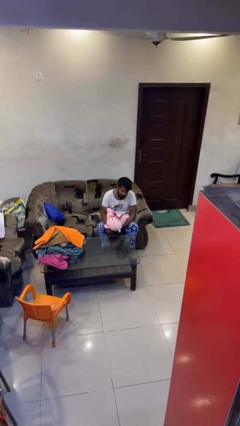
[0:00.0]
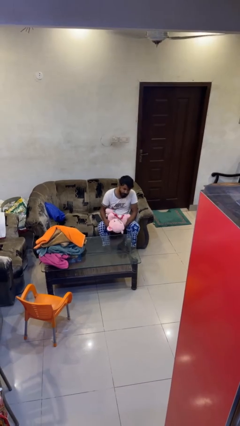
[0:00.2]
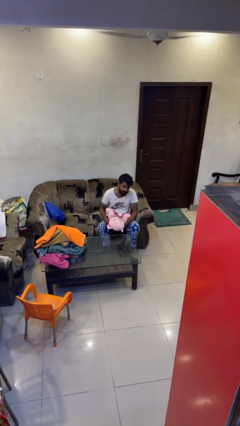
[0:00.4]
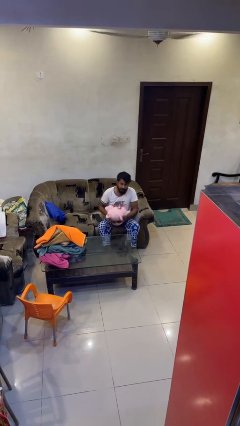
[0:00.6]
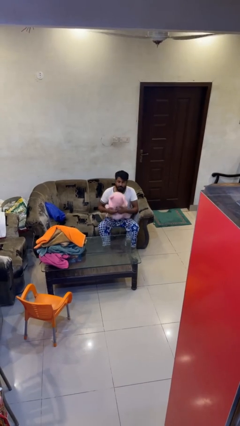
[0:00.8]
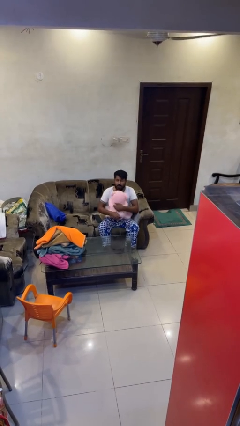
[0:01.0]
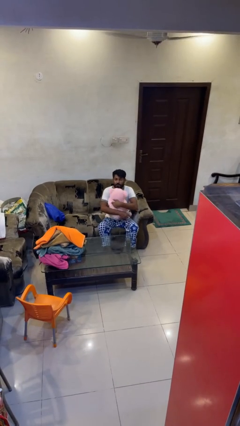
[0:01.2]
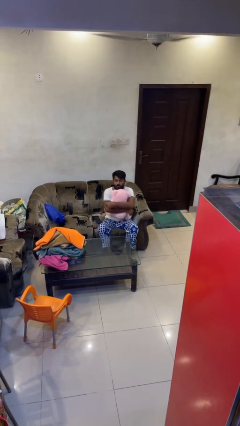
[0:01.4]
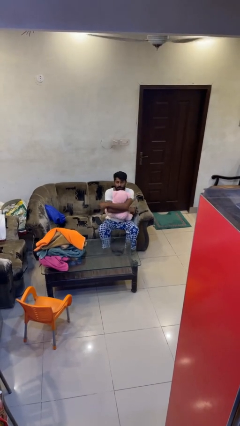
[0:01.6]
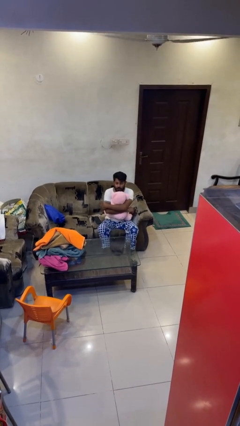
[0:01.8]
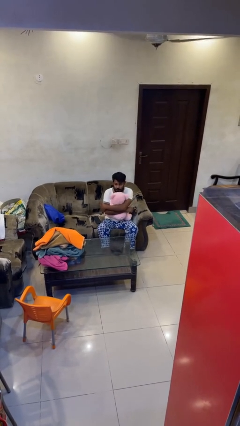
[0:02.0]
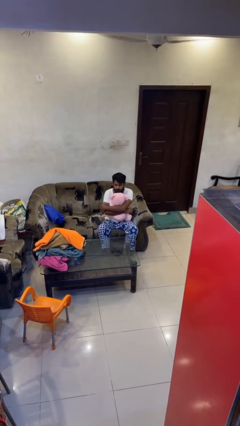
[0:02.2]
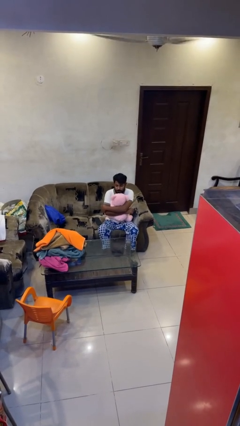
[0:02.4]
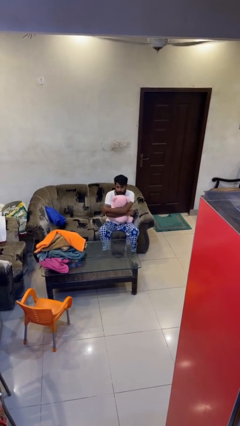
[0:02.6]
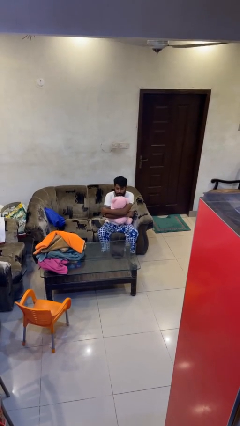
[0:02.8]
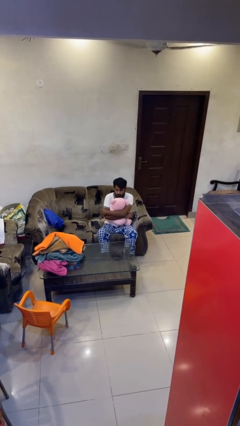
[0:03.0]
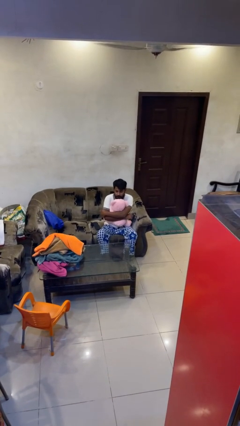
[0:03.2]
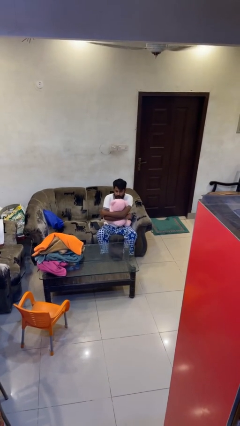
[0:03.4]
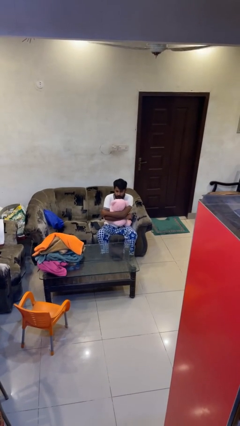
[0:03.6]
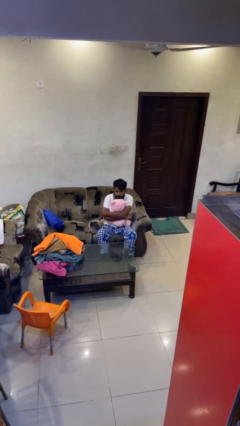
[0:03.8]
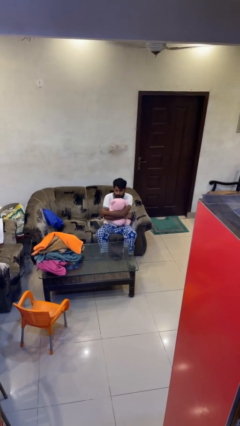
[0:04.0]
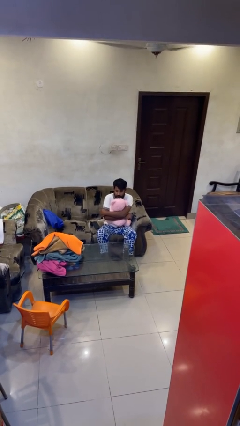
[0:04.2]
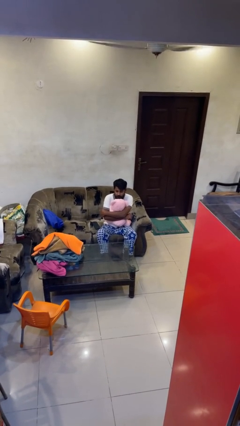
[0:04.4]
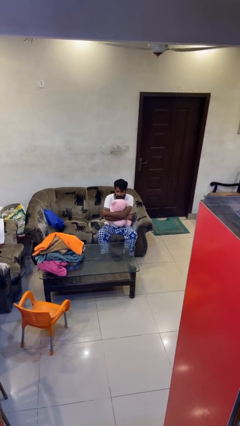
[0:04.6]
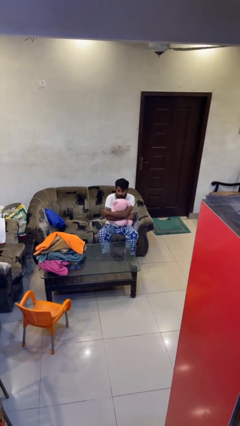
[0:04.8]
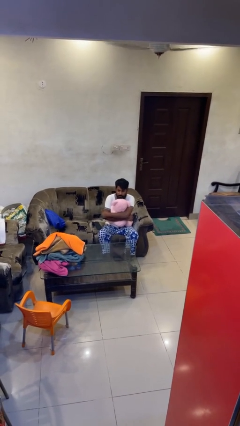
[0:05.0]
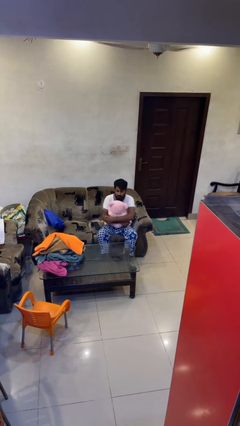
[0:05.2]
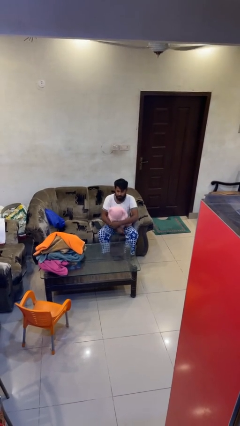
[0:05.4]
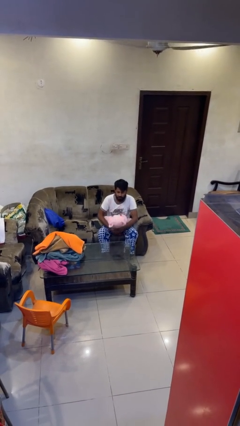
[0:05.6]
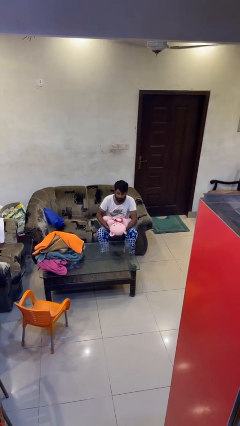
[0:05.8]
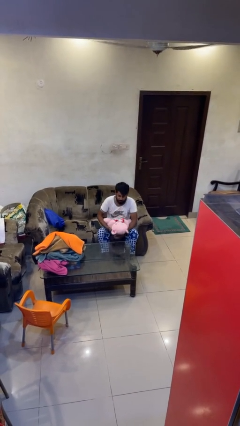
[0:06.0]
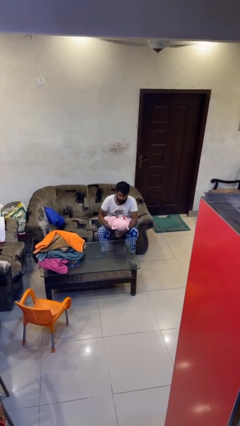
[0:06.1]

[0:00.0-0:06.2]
person hugs stuffed animal

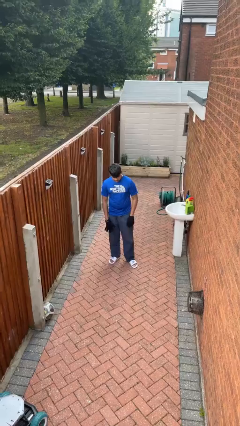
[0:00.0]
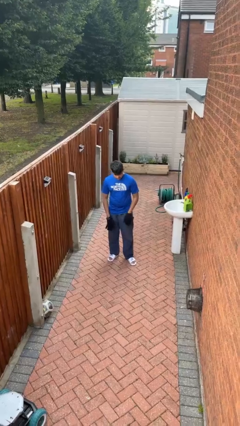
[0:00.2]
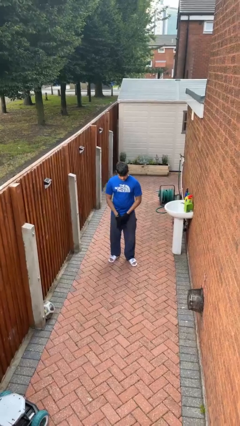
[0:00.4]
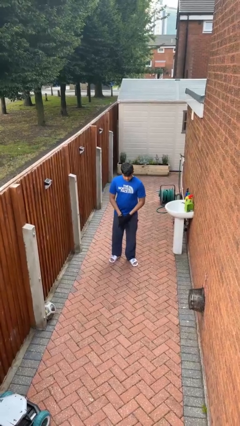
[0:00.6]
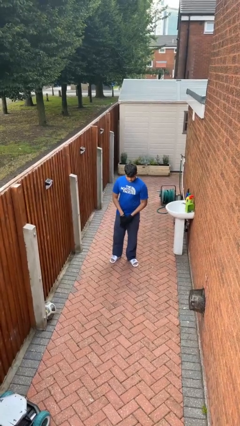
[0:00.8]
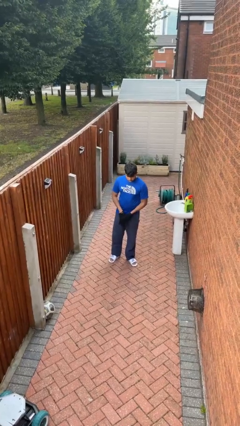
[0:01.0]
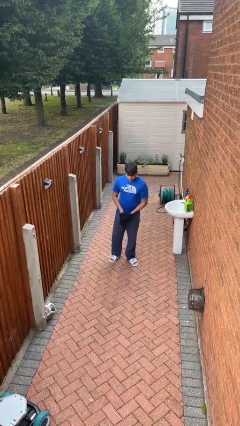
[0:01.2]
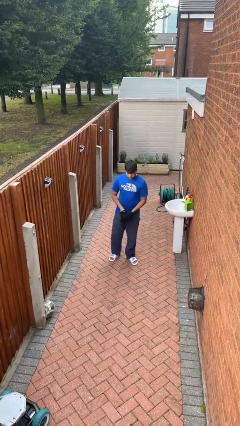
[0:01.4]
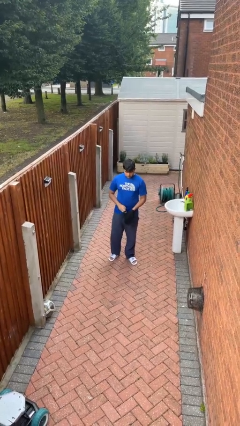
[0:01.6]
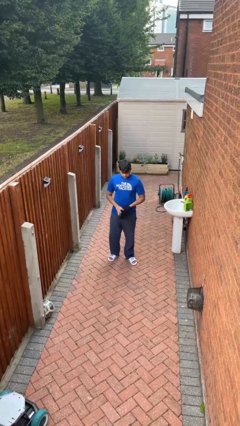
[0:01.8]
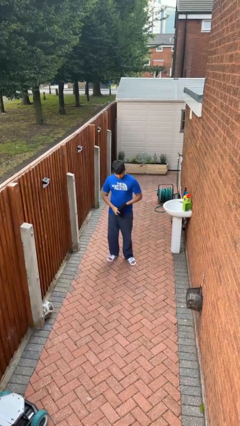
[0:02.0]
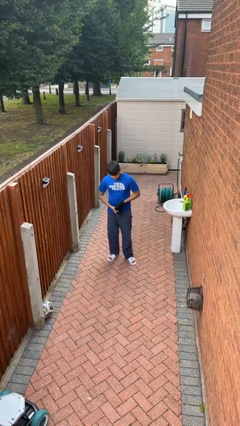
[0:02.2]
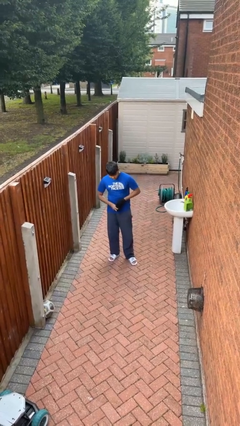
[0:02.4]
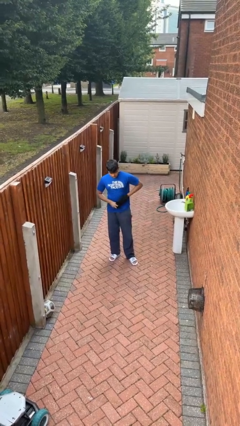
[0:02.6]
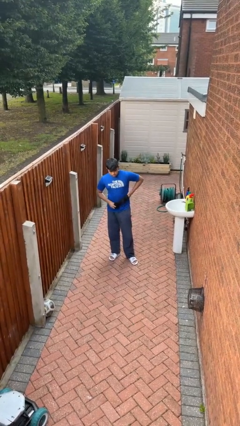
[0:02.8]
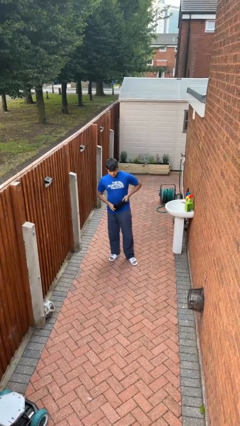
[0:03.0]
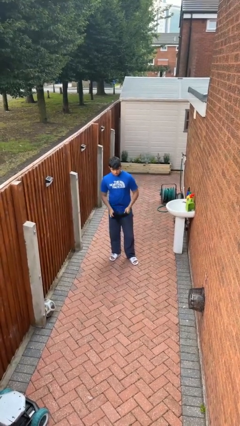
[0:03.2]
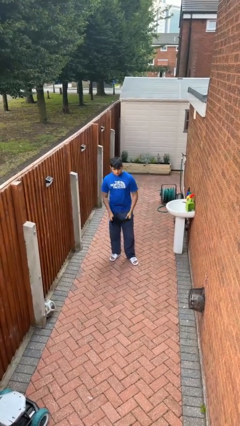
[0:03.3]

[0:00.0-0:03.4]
person takes off gloves

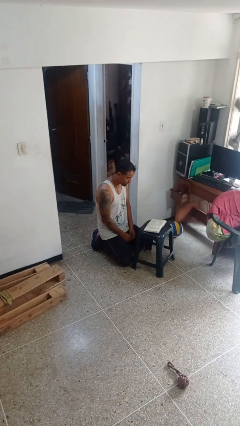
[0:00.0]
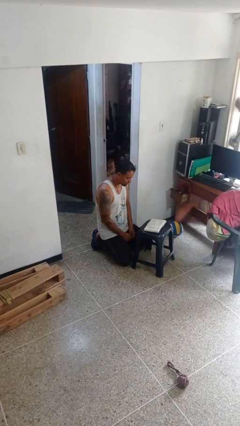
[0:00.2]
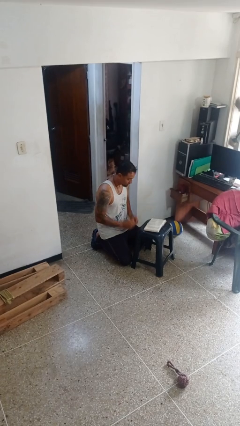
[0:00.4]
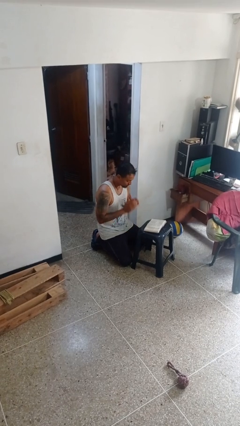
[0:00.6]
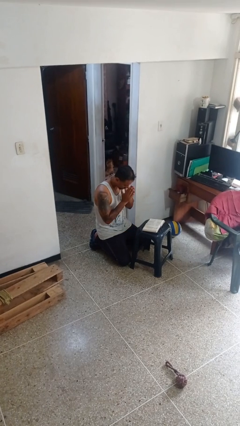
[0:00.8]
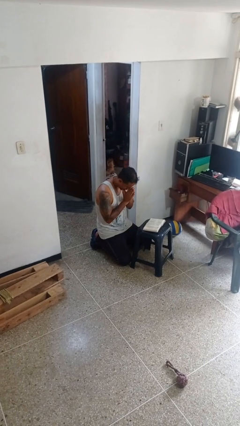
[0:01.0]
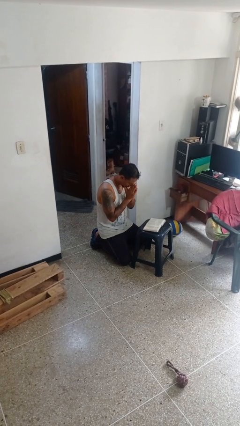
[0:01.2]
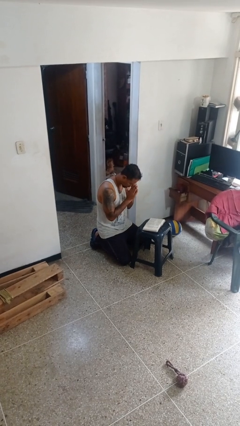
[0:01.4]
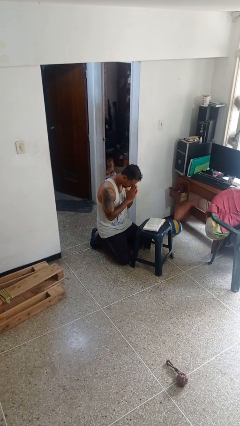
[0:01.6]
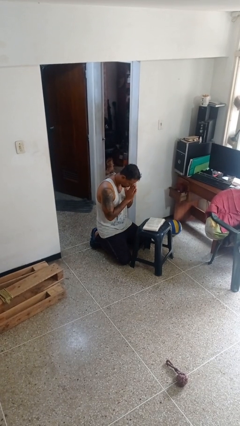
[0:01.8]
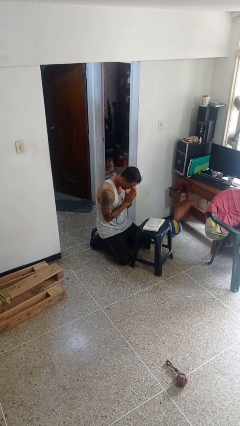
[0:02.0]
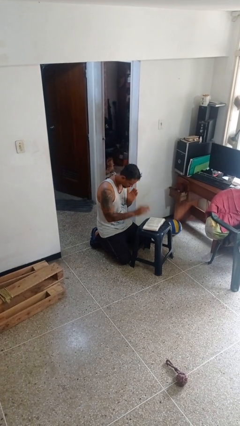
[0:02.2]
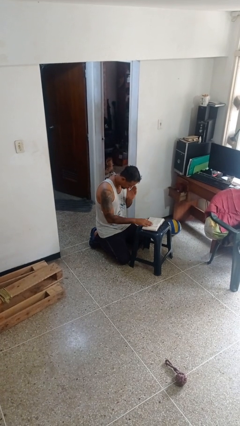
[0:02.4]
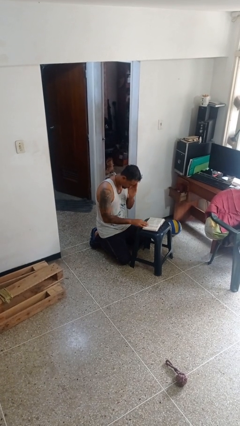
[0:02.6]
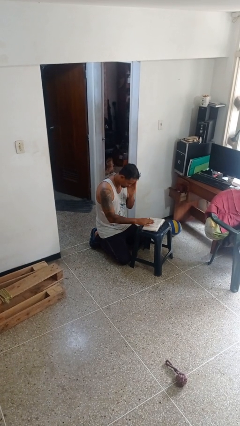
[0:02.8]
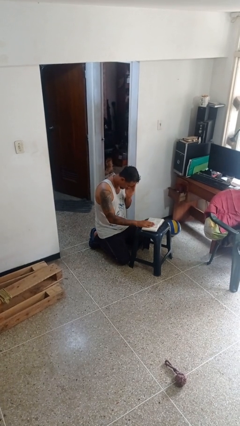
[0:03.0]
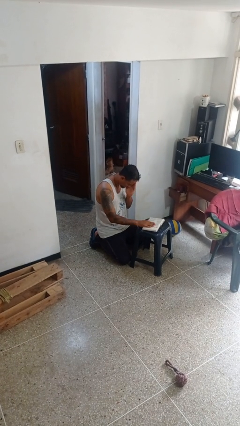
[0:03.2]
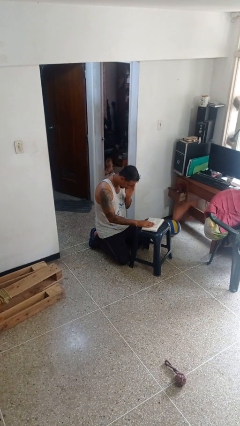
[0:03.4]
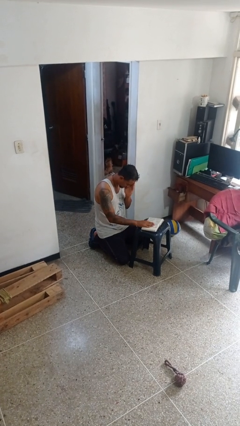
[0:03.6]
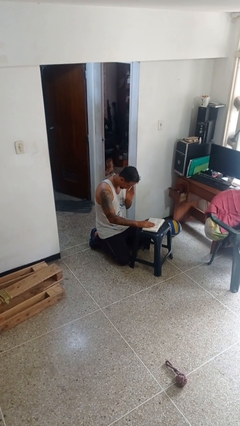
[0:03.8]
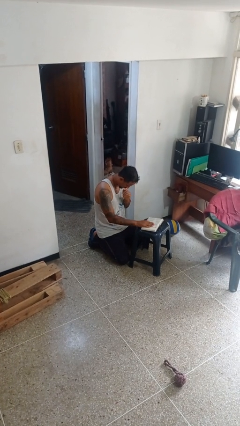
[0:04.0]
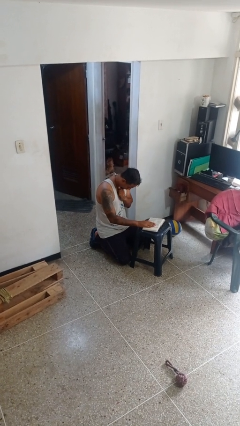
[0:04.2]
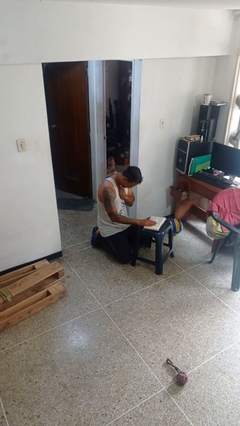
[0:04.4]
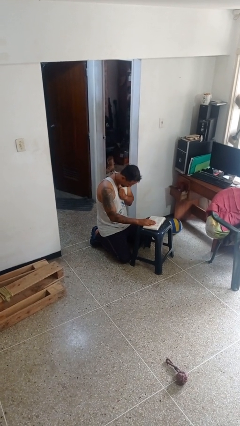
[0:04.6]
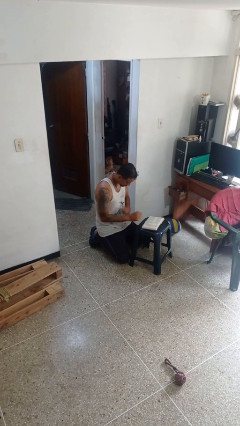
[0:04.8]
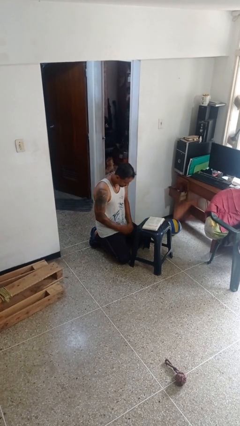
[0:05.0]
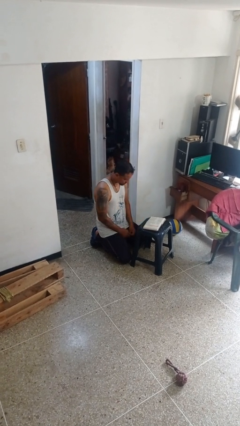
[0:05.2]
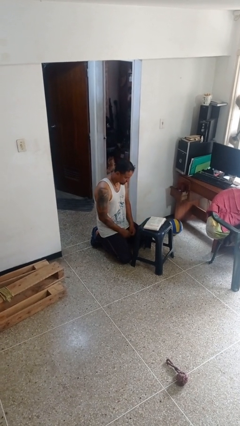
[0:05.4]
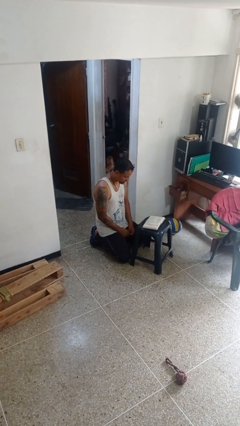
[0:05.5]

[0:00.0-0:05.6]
person prays

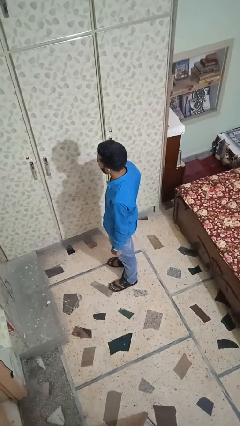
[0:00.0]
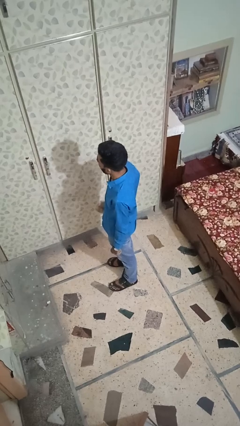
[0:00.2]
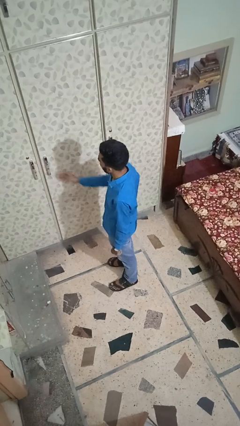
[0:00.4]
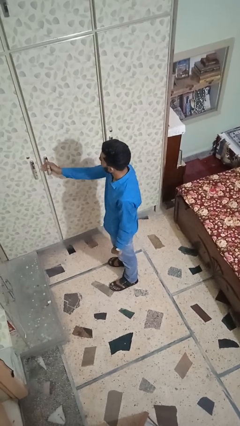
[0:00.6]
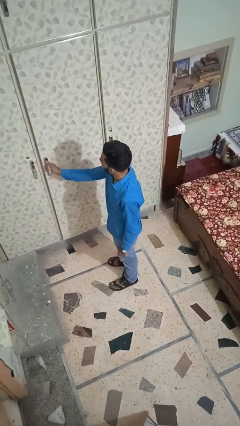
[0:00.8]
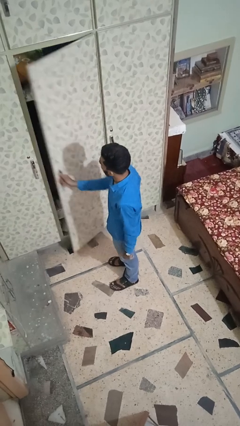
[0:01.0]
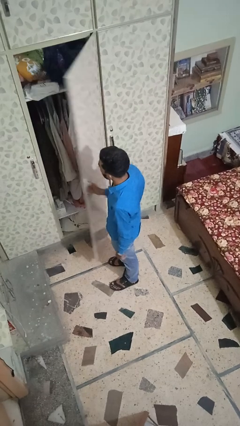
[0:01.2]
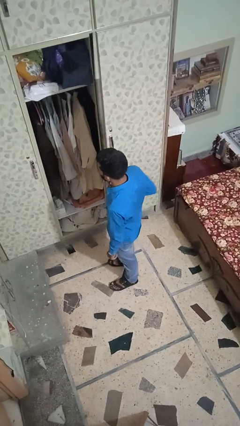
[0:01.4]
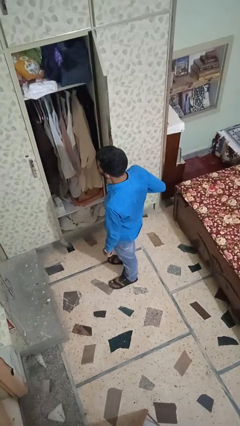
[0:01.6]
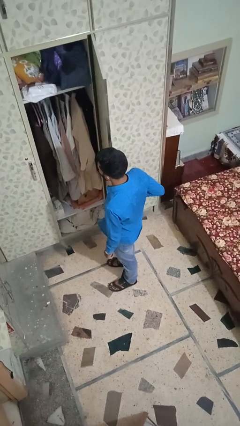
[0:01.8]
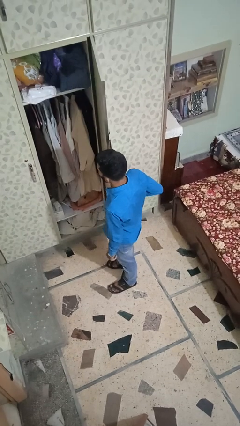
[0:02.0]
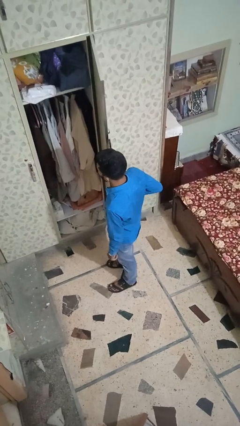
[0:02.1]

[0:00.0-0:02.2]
person opens closet door

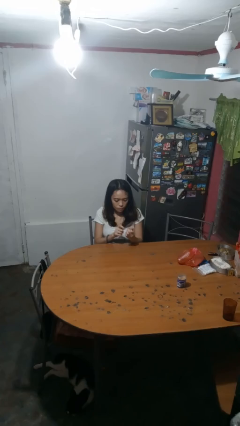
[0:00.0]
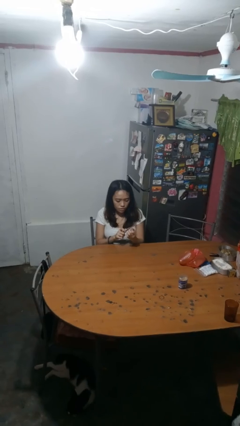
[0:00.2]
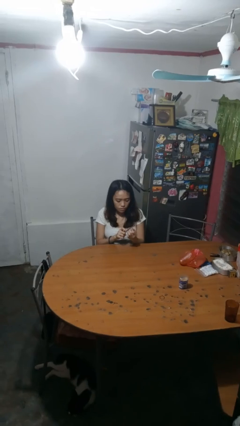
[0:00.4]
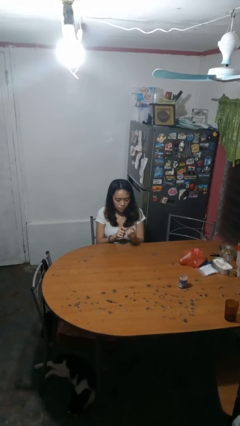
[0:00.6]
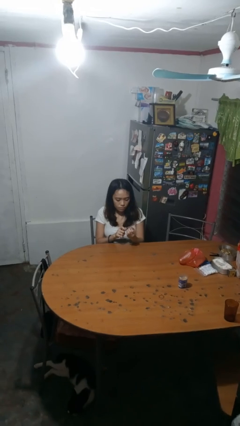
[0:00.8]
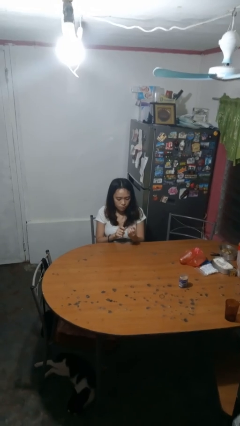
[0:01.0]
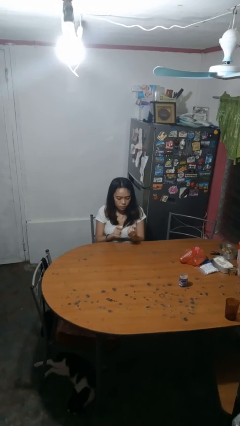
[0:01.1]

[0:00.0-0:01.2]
person files fingernails
